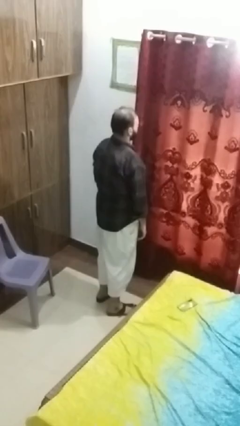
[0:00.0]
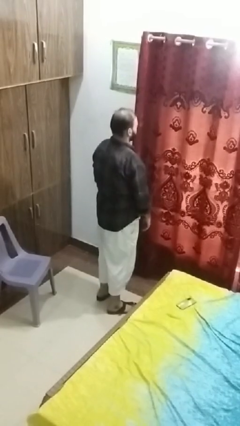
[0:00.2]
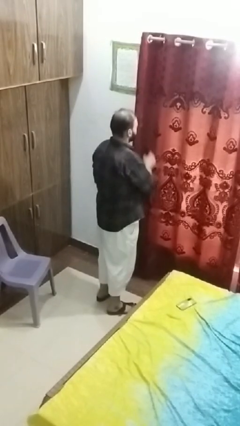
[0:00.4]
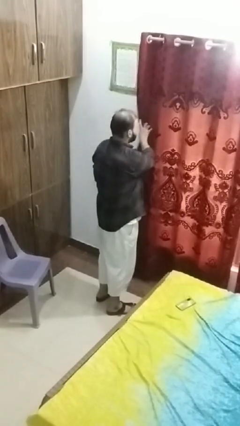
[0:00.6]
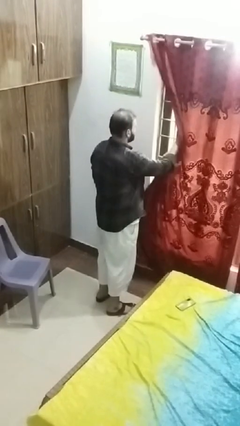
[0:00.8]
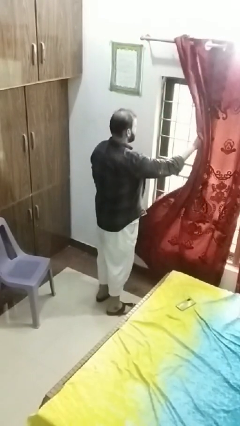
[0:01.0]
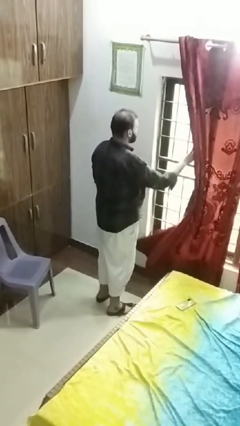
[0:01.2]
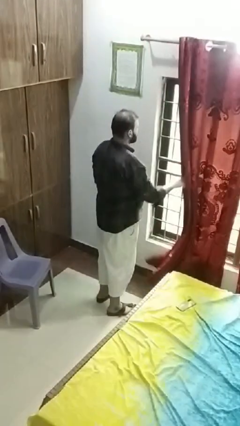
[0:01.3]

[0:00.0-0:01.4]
person opens curtains

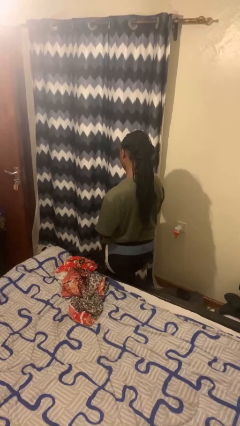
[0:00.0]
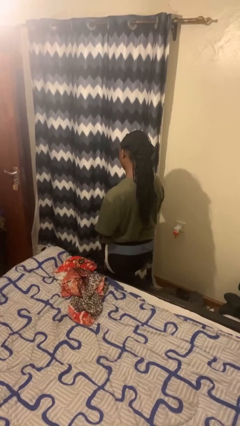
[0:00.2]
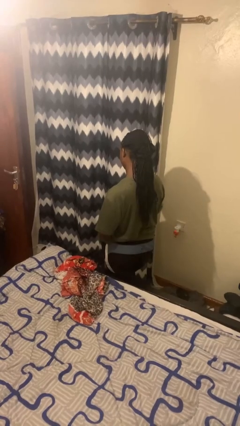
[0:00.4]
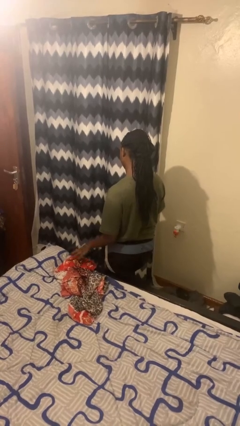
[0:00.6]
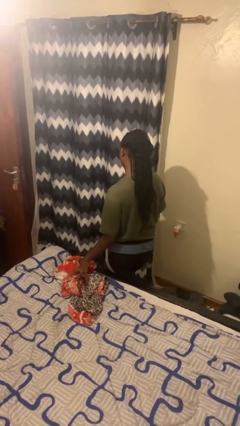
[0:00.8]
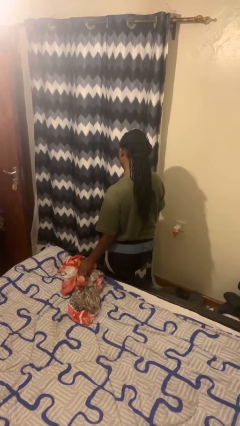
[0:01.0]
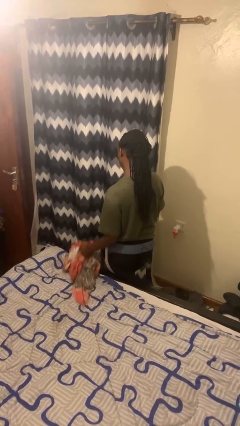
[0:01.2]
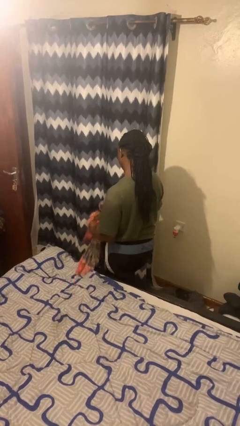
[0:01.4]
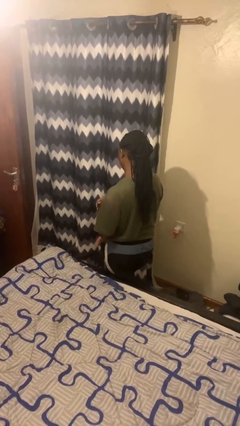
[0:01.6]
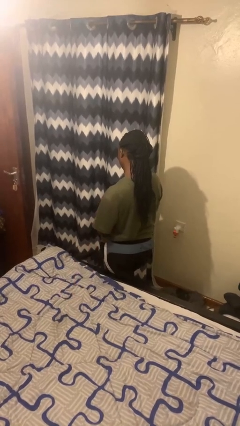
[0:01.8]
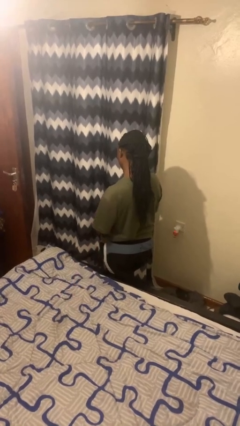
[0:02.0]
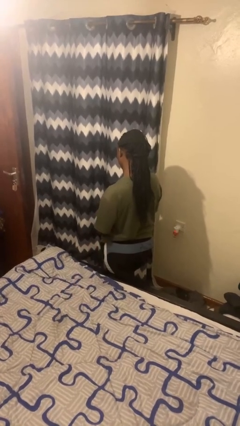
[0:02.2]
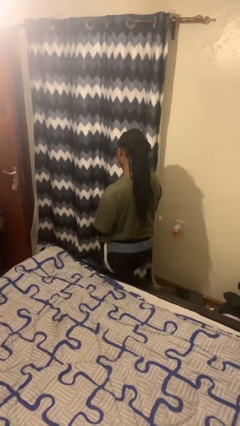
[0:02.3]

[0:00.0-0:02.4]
person picks up object from bed

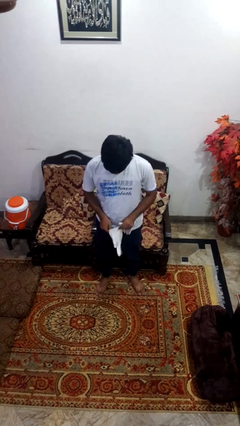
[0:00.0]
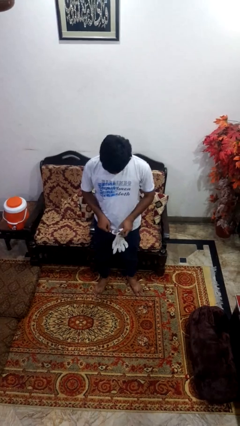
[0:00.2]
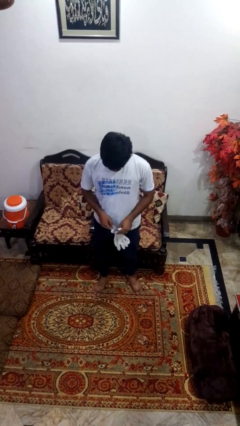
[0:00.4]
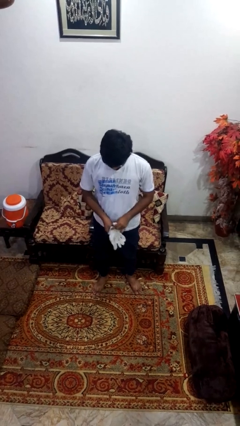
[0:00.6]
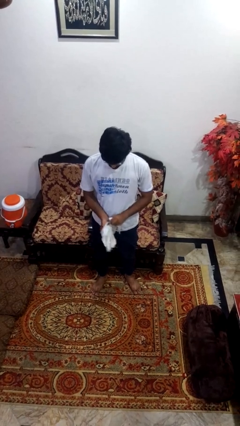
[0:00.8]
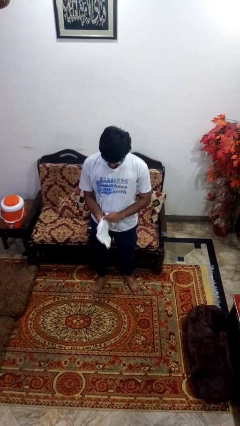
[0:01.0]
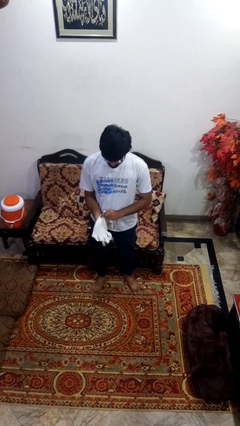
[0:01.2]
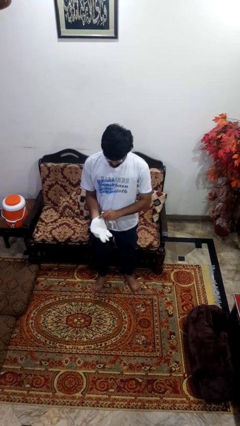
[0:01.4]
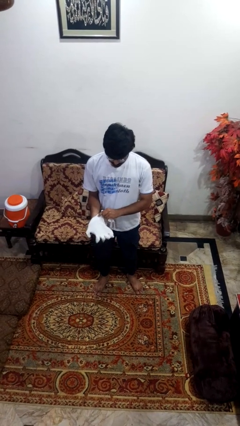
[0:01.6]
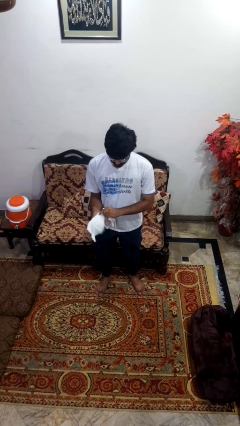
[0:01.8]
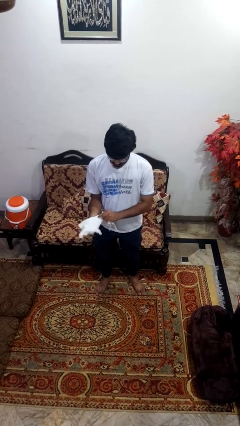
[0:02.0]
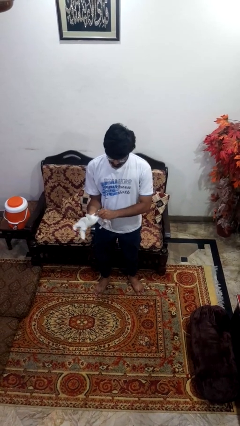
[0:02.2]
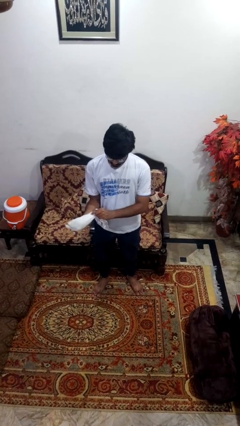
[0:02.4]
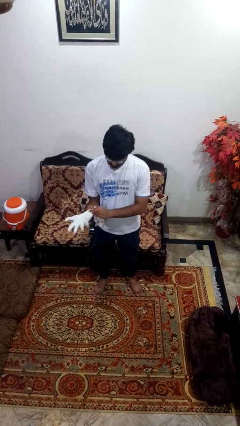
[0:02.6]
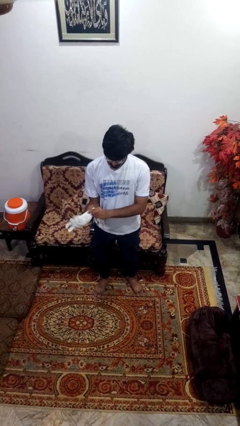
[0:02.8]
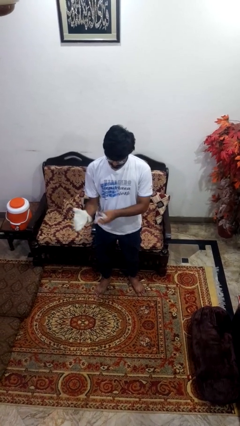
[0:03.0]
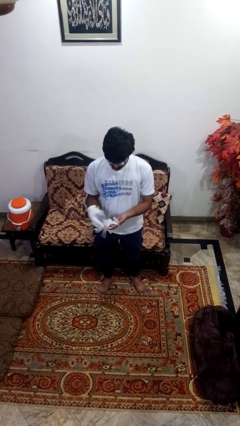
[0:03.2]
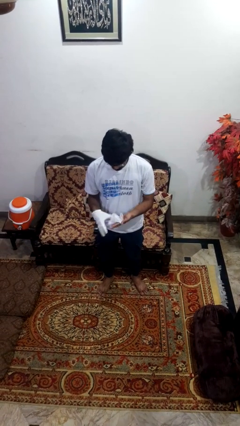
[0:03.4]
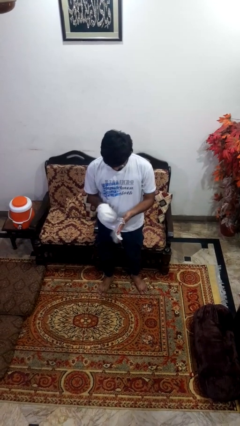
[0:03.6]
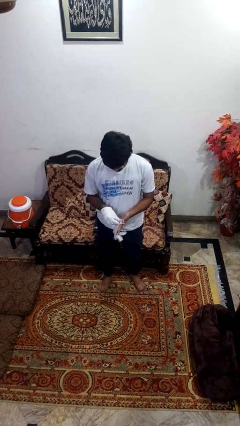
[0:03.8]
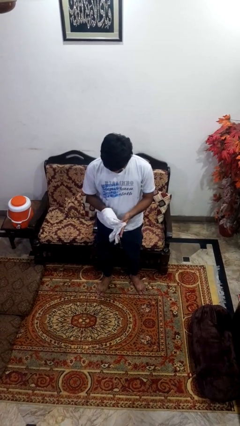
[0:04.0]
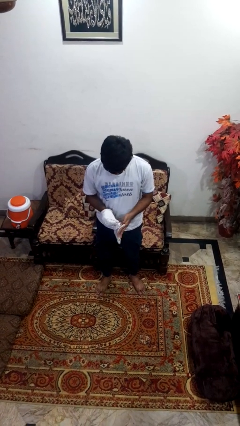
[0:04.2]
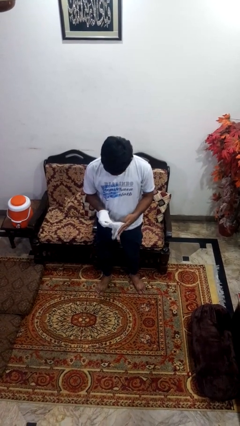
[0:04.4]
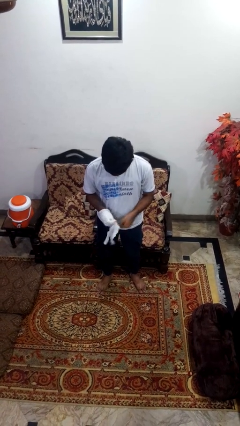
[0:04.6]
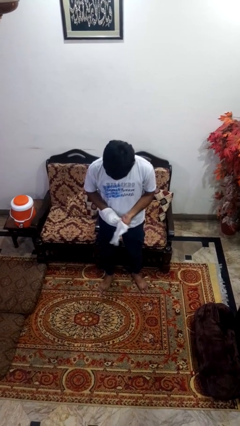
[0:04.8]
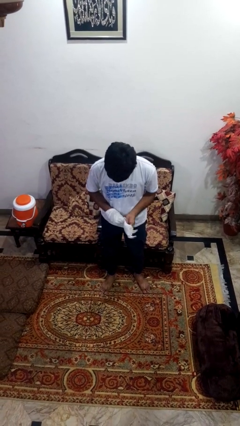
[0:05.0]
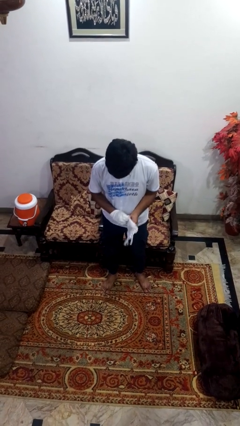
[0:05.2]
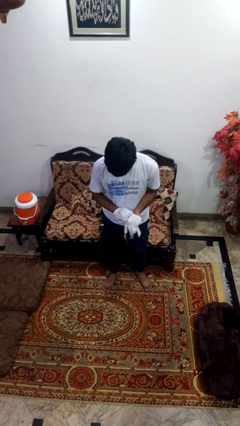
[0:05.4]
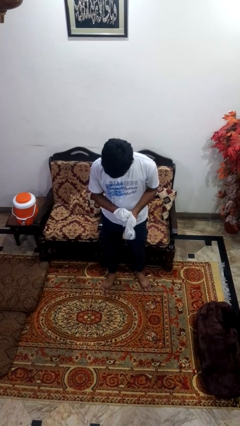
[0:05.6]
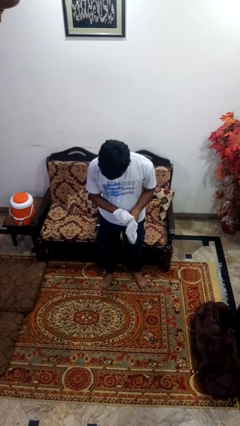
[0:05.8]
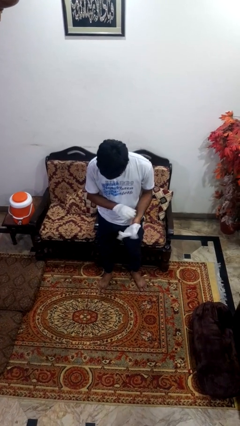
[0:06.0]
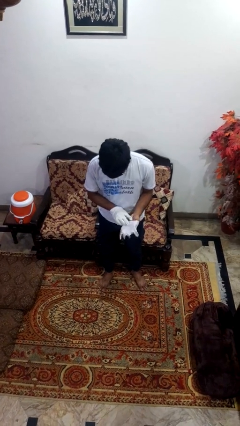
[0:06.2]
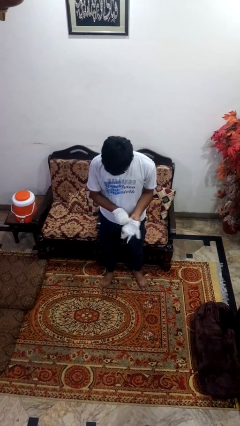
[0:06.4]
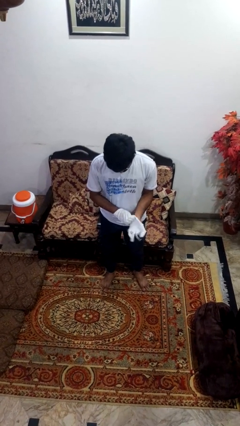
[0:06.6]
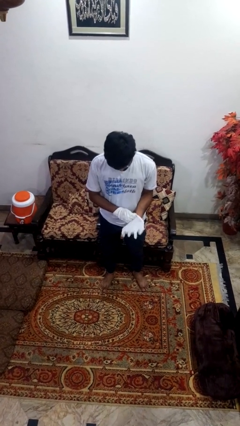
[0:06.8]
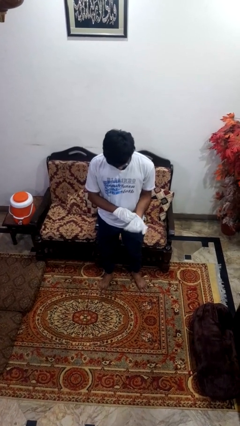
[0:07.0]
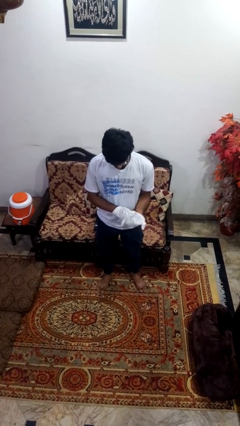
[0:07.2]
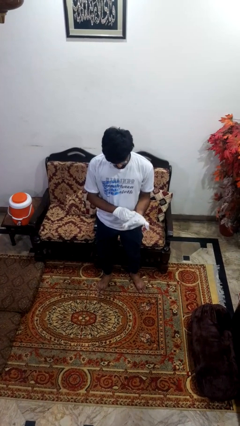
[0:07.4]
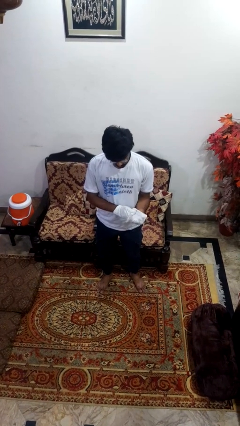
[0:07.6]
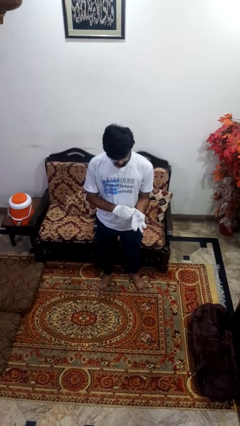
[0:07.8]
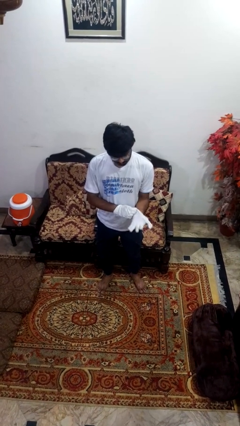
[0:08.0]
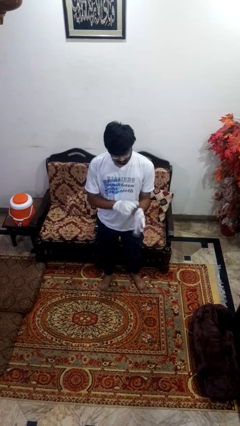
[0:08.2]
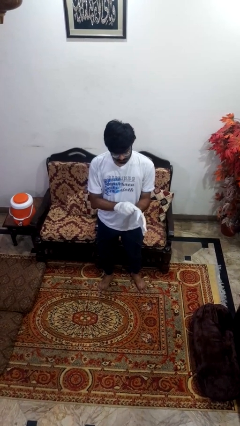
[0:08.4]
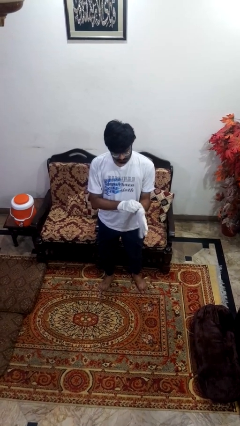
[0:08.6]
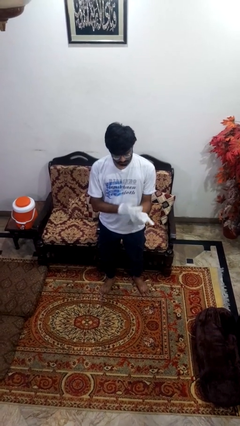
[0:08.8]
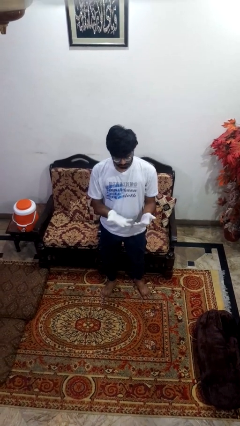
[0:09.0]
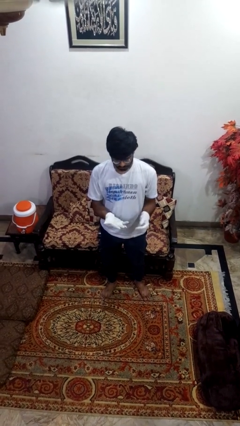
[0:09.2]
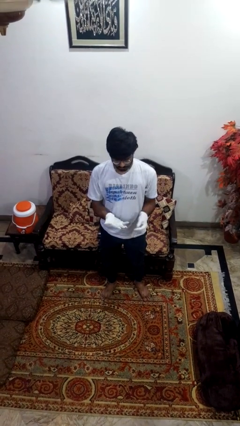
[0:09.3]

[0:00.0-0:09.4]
person puts on gloves

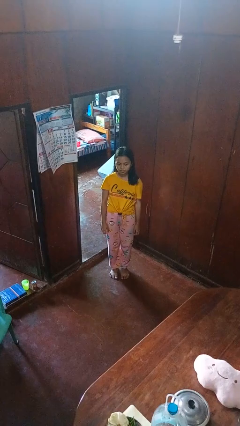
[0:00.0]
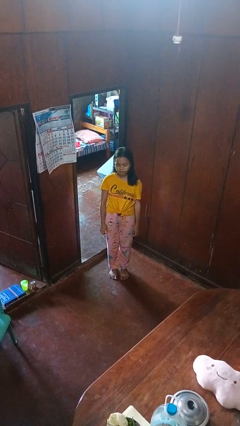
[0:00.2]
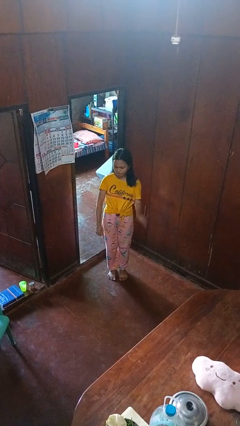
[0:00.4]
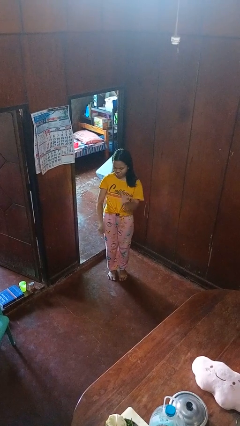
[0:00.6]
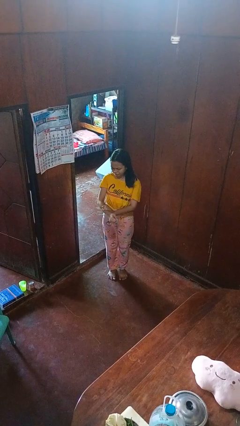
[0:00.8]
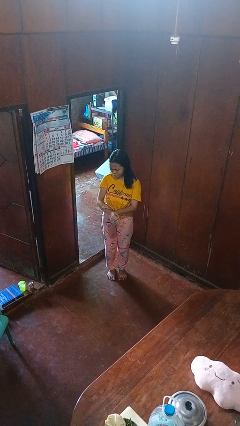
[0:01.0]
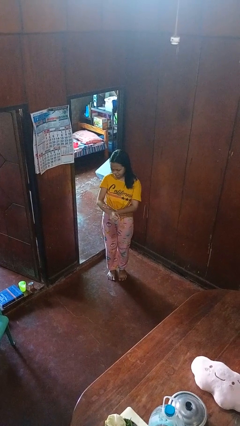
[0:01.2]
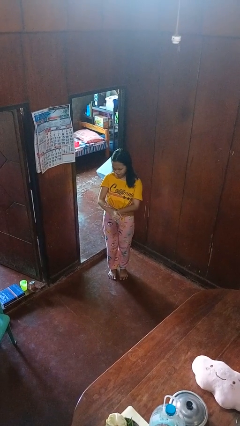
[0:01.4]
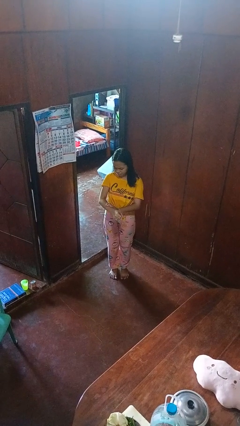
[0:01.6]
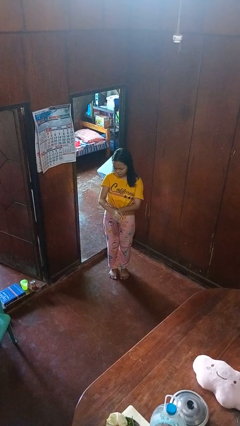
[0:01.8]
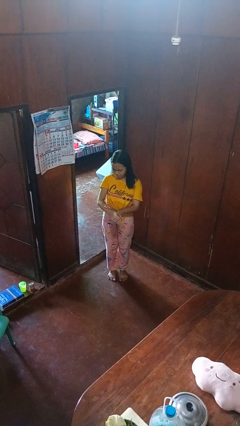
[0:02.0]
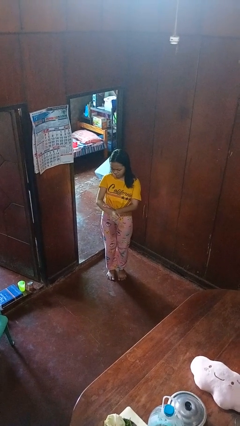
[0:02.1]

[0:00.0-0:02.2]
person swats bug

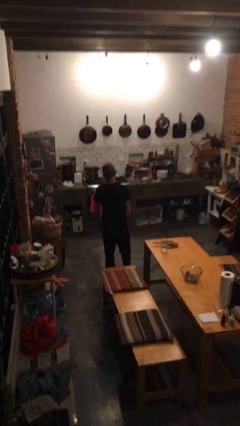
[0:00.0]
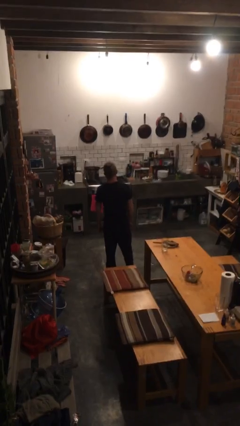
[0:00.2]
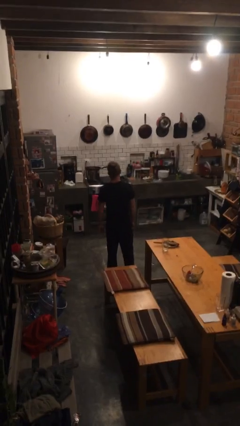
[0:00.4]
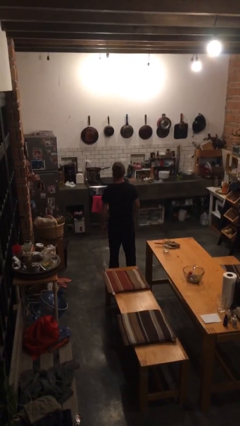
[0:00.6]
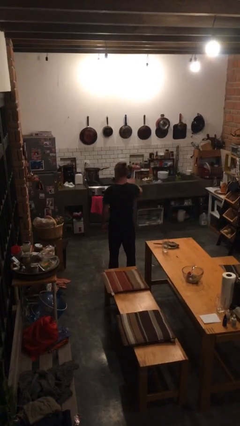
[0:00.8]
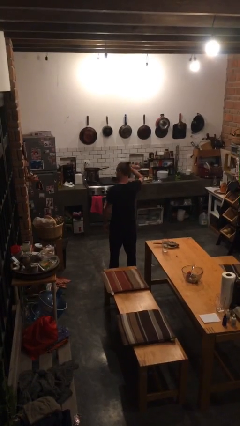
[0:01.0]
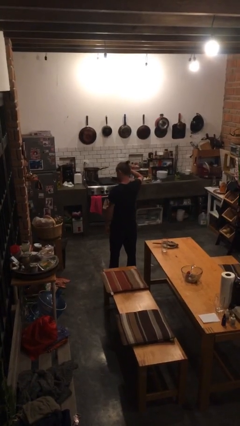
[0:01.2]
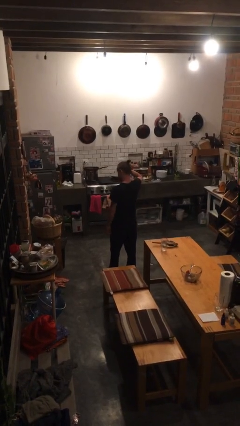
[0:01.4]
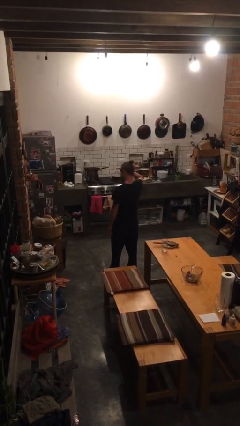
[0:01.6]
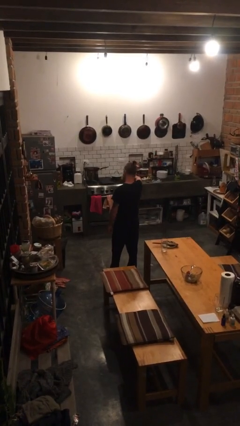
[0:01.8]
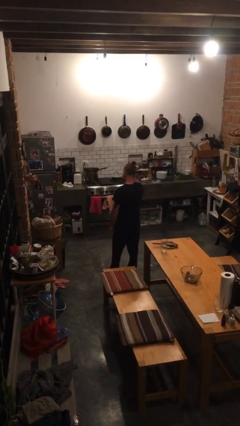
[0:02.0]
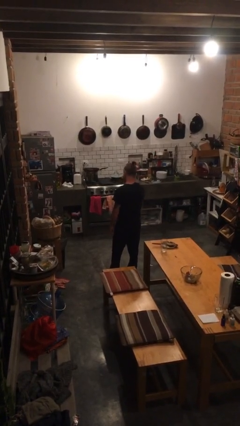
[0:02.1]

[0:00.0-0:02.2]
person salutes
